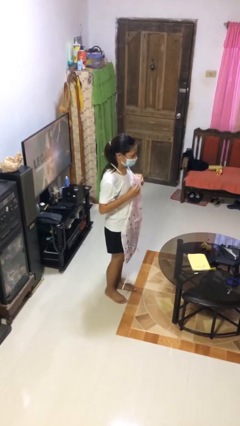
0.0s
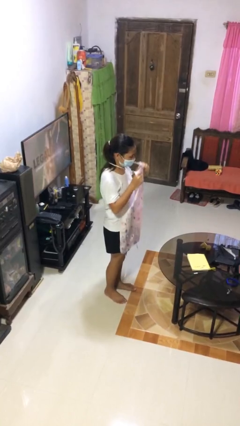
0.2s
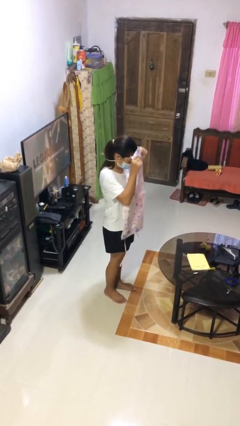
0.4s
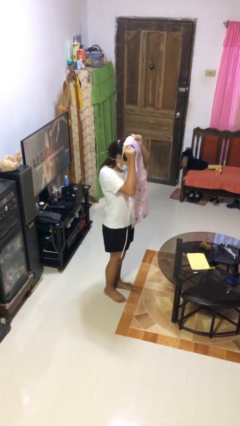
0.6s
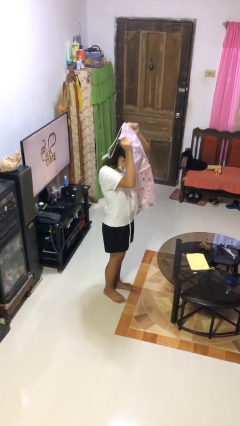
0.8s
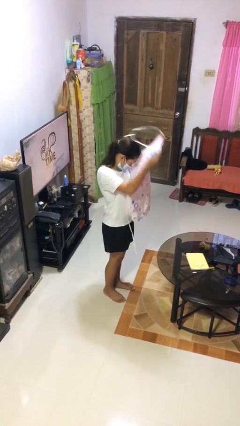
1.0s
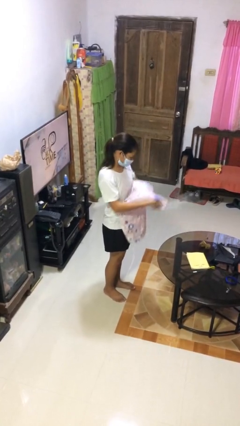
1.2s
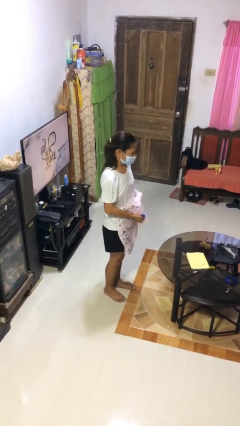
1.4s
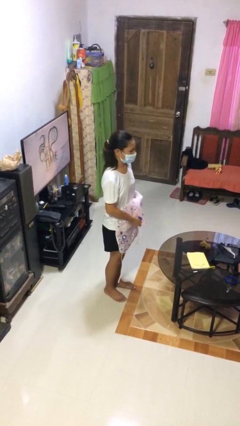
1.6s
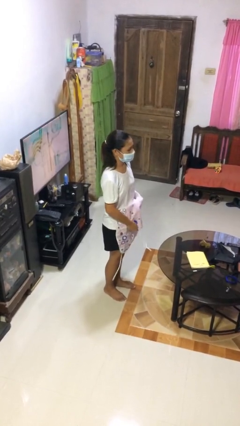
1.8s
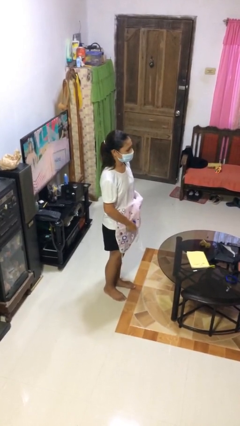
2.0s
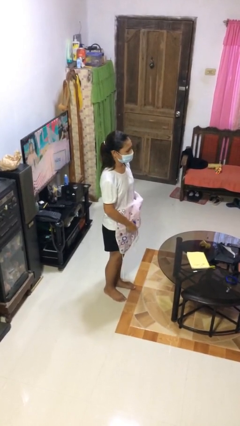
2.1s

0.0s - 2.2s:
person takes off apron

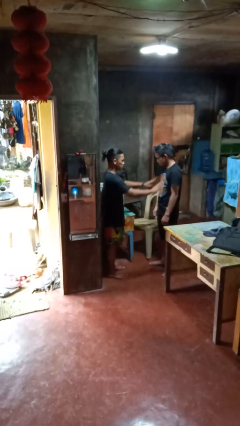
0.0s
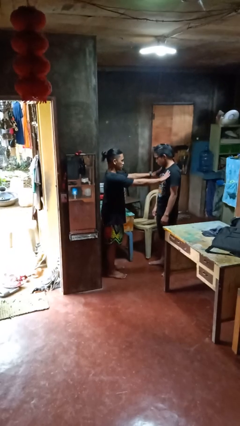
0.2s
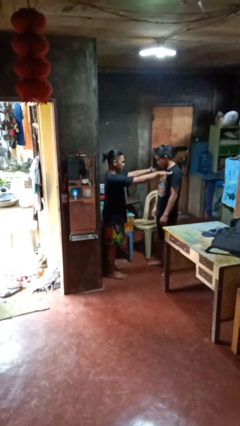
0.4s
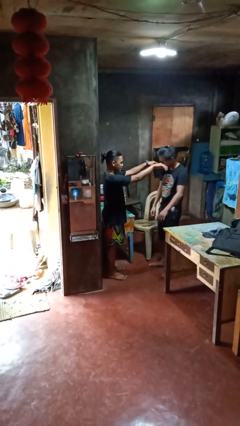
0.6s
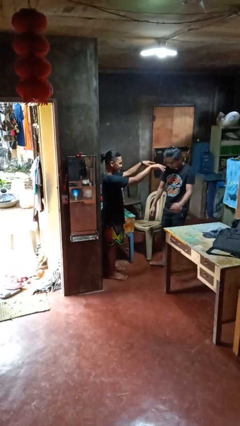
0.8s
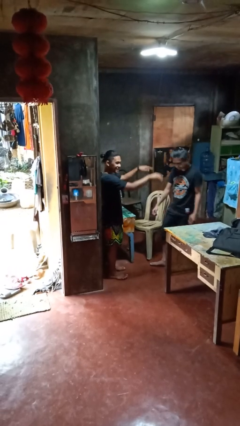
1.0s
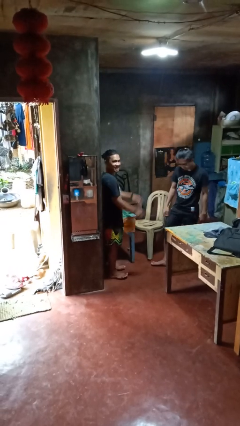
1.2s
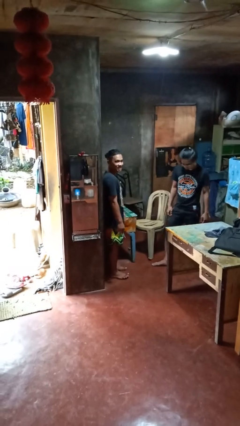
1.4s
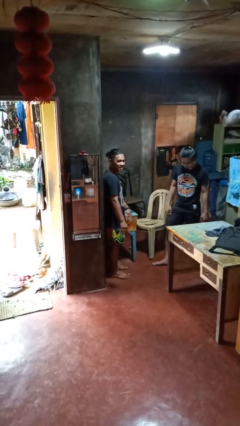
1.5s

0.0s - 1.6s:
person shoves person

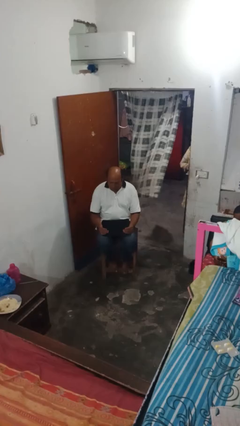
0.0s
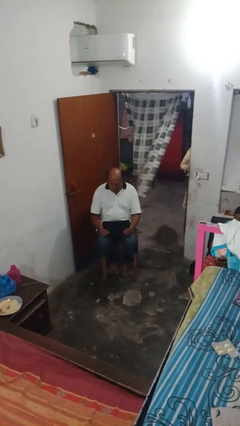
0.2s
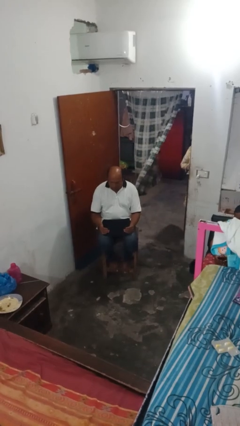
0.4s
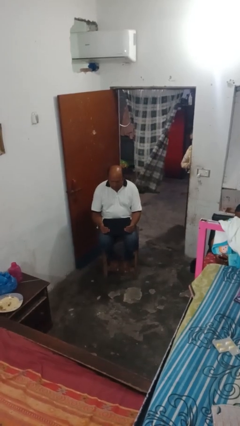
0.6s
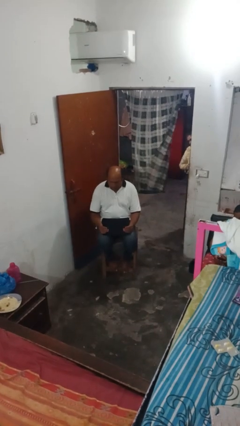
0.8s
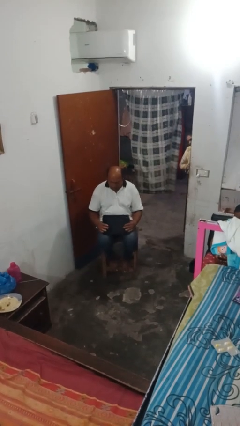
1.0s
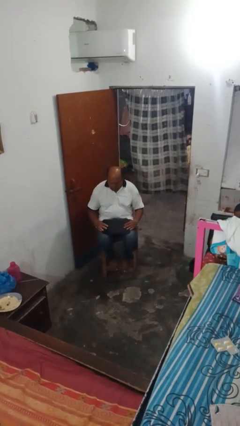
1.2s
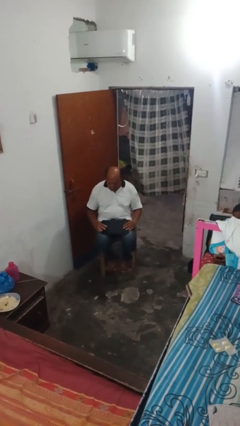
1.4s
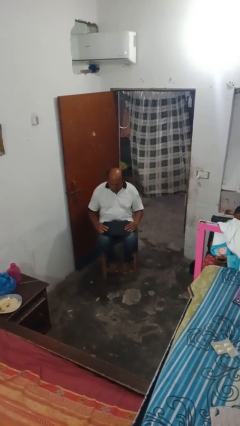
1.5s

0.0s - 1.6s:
person closes laptop

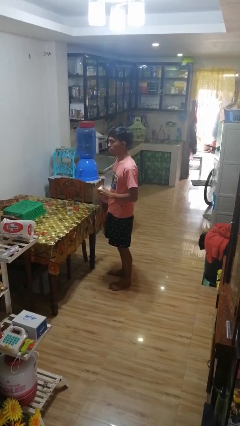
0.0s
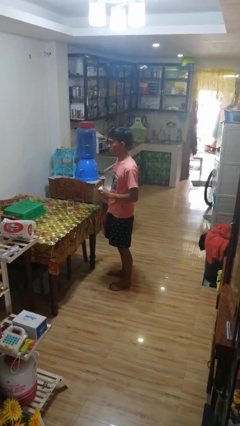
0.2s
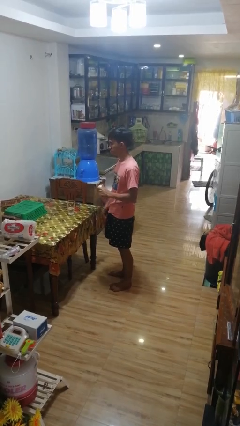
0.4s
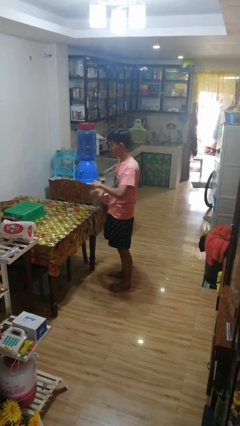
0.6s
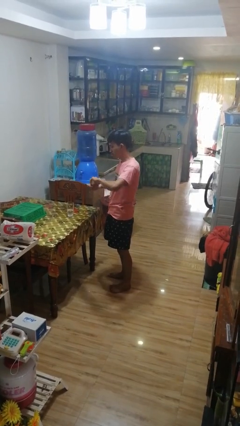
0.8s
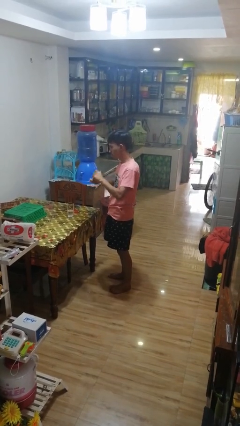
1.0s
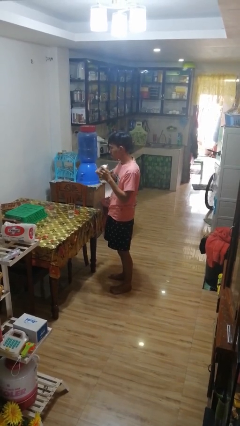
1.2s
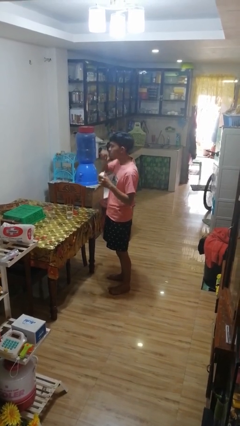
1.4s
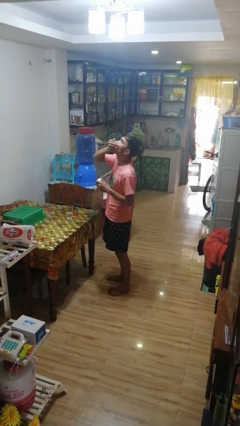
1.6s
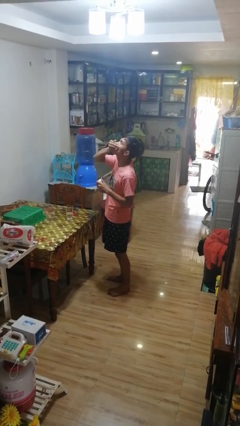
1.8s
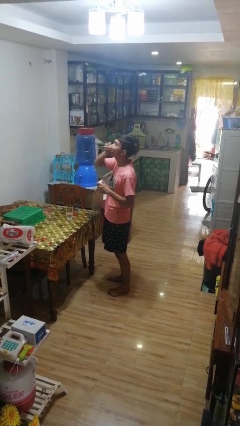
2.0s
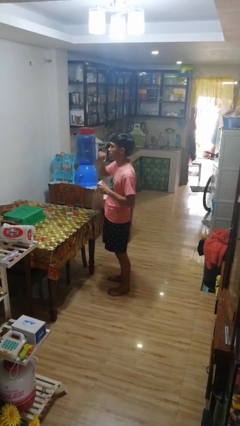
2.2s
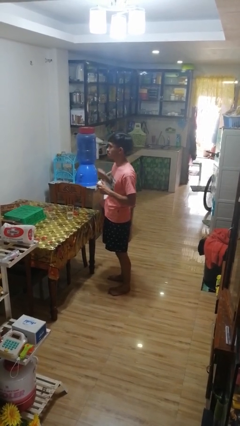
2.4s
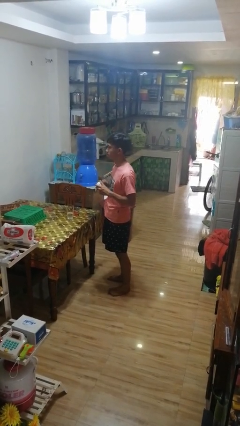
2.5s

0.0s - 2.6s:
person takes medicine pills

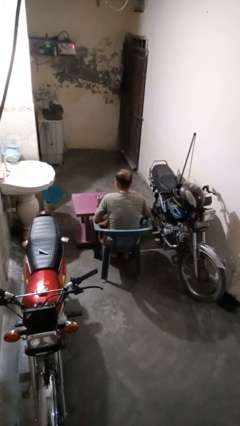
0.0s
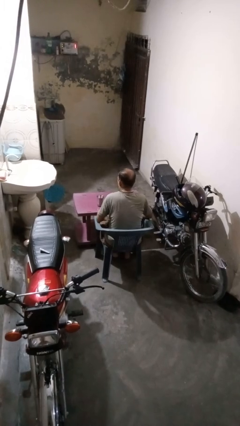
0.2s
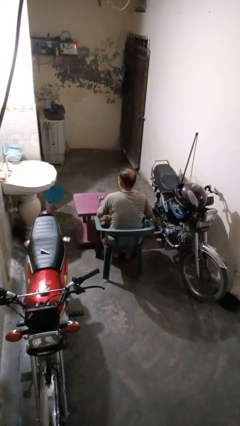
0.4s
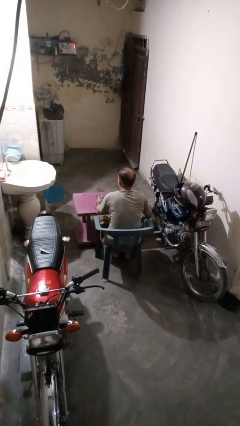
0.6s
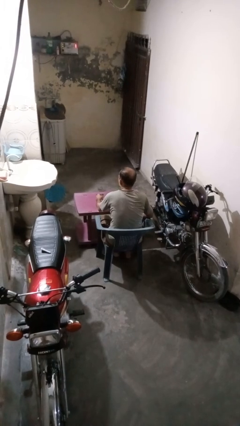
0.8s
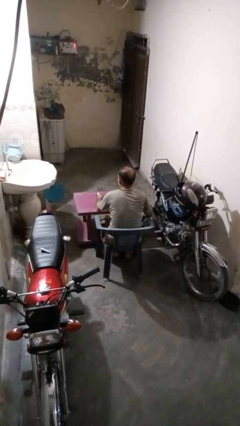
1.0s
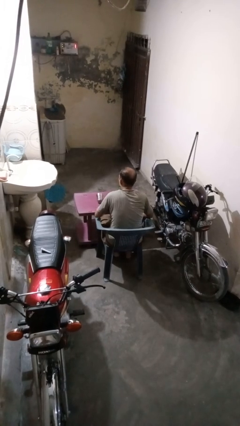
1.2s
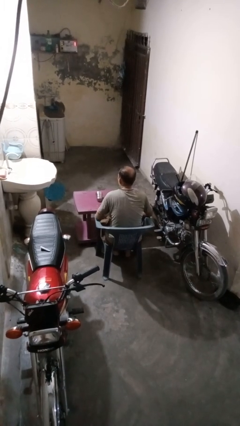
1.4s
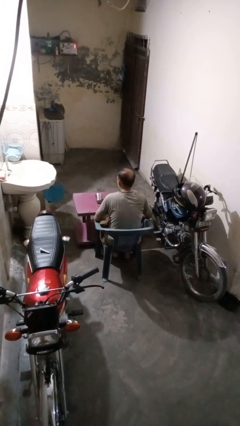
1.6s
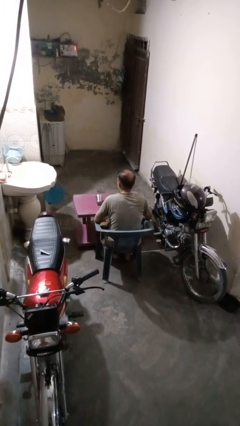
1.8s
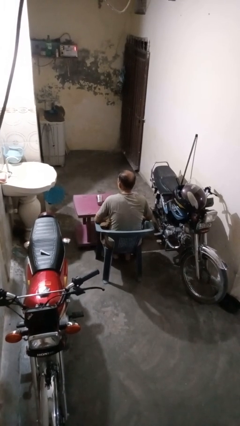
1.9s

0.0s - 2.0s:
person knocks over glass

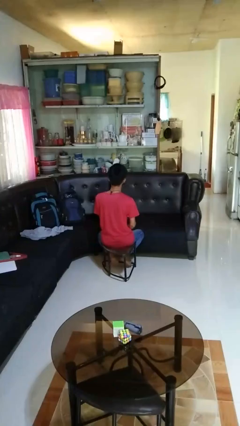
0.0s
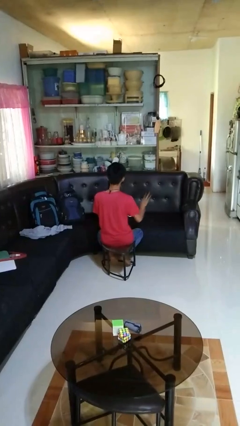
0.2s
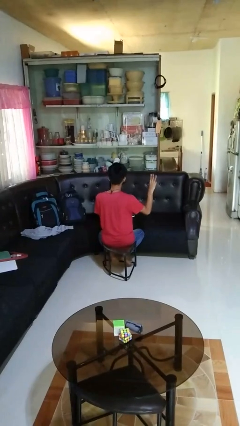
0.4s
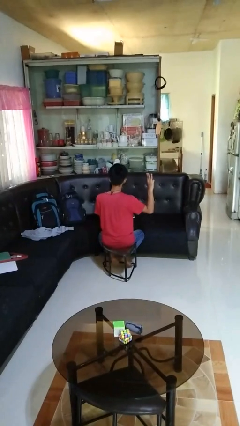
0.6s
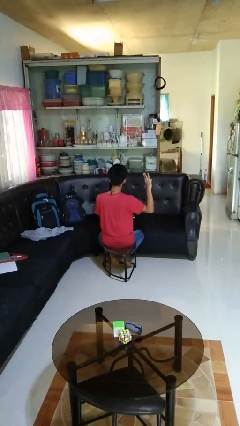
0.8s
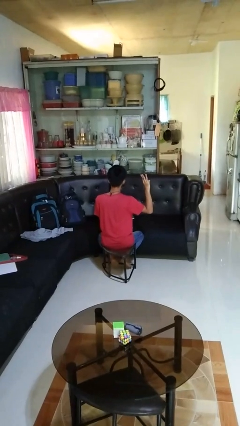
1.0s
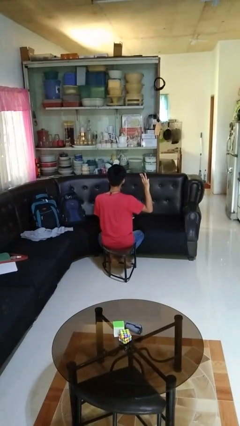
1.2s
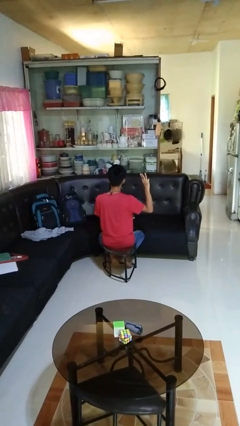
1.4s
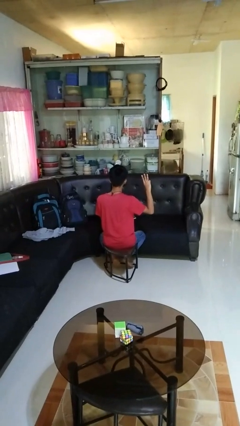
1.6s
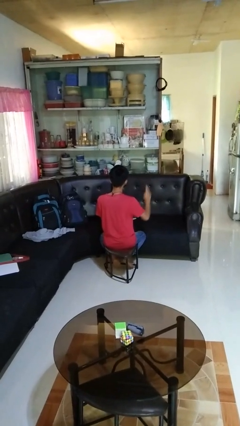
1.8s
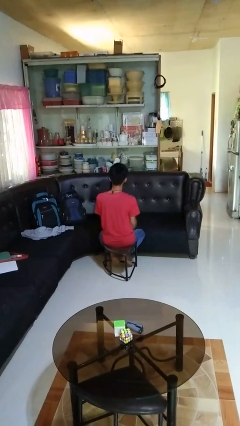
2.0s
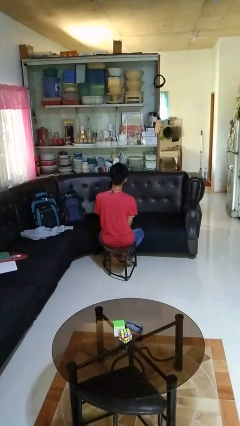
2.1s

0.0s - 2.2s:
person gestures number three

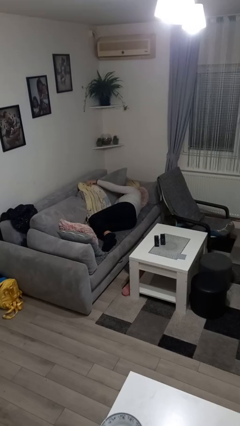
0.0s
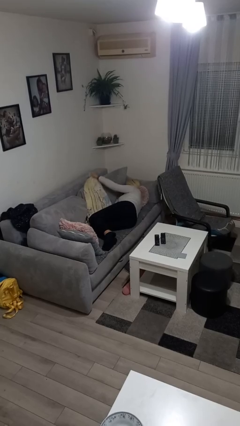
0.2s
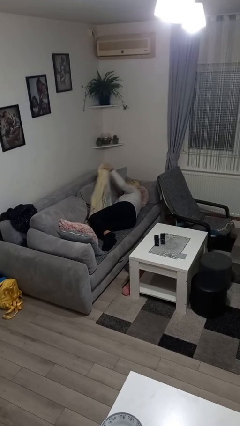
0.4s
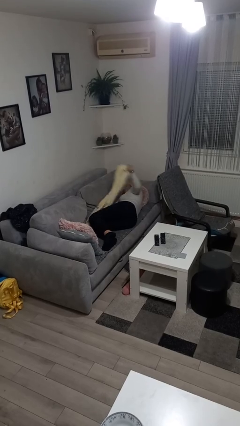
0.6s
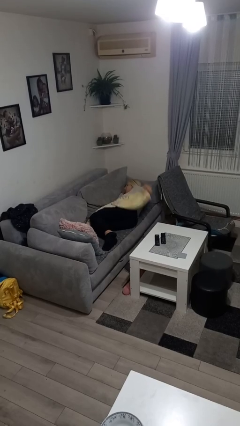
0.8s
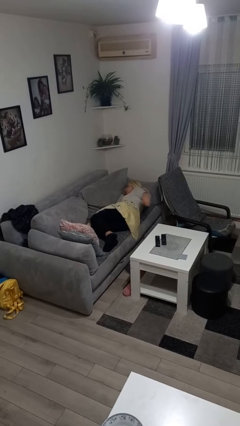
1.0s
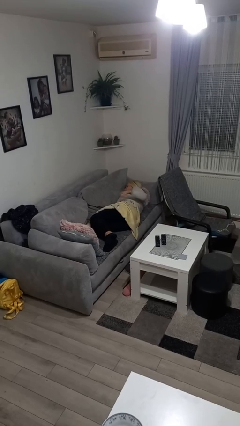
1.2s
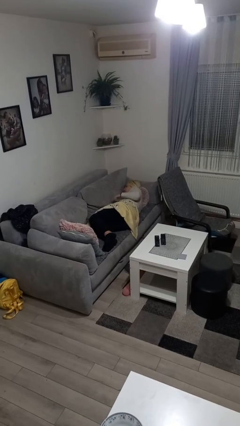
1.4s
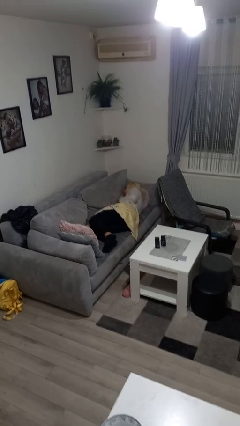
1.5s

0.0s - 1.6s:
person covers with blanket

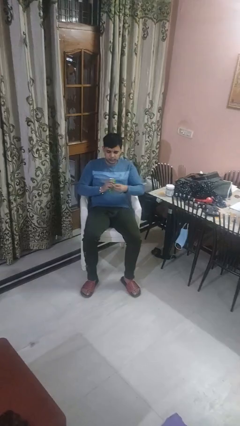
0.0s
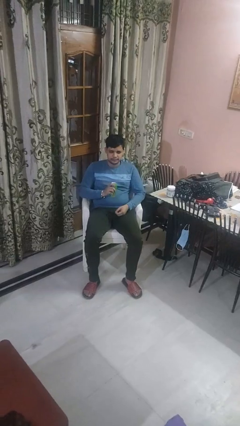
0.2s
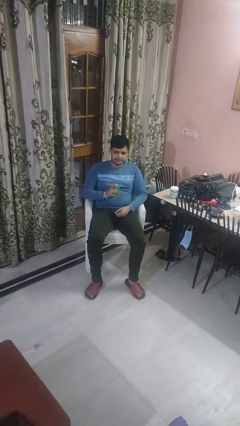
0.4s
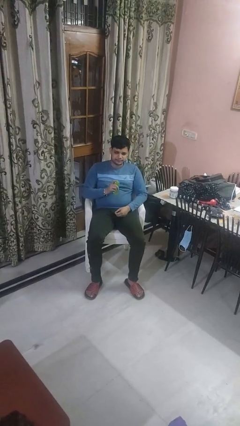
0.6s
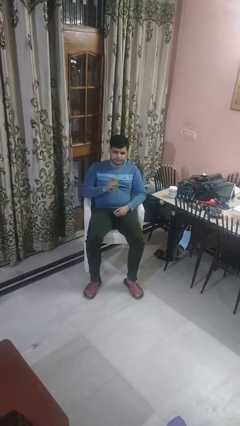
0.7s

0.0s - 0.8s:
person opens beverage can

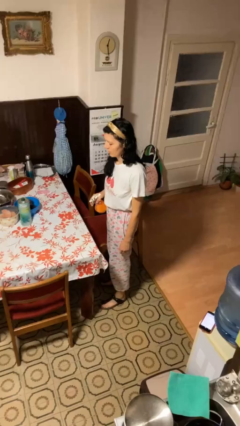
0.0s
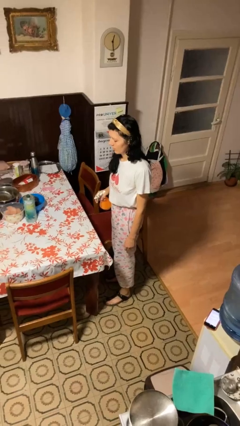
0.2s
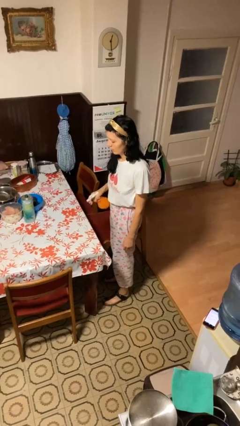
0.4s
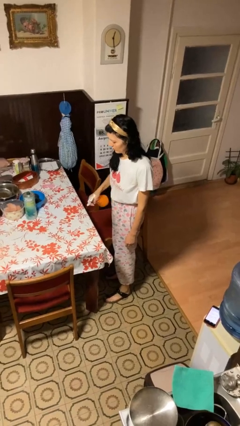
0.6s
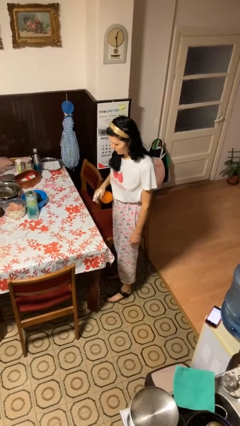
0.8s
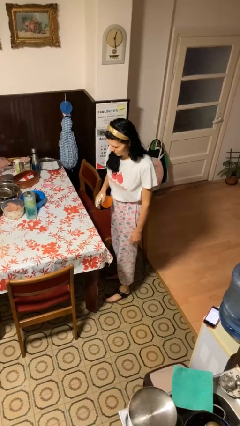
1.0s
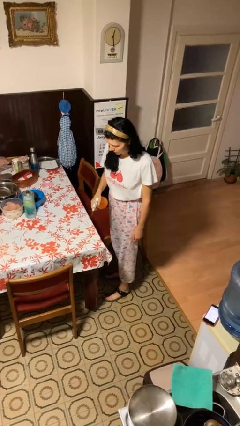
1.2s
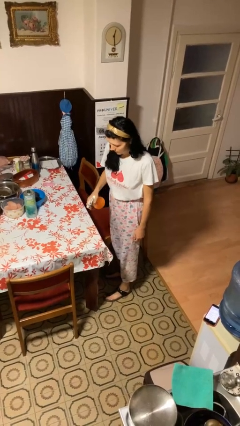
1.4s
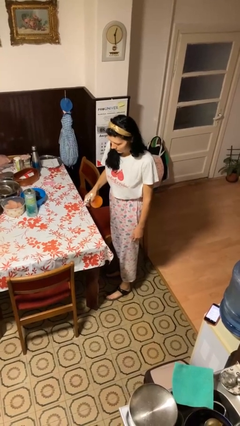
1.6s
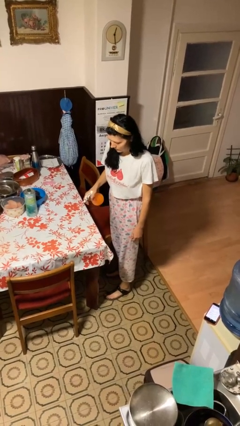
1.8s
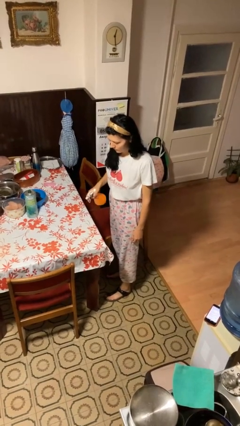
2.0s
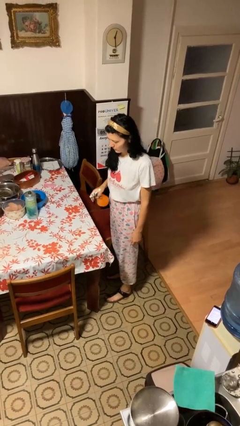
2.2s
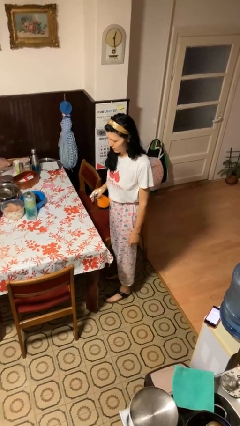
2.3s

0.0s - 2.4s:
person sprays from bottle
